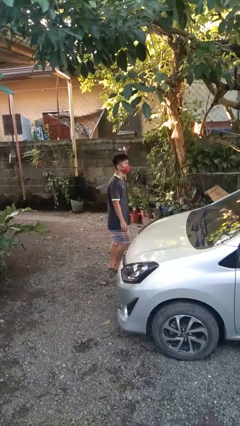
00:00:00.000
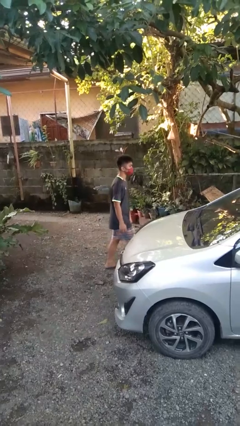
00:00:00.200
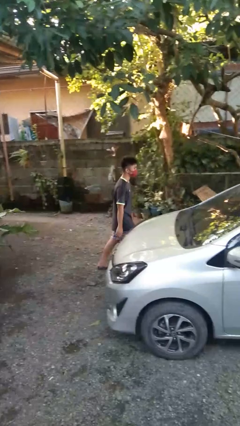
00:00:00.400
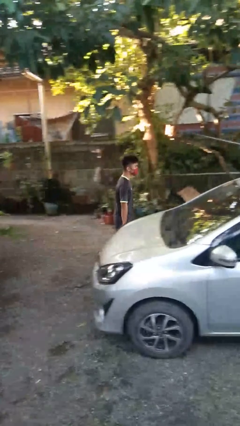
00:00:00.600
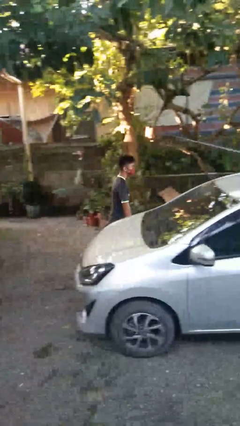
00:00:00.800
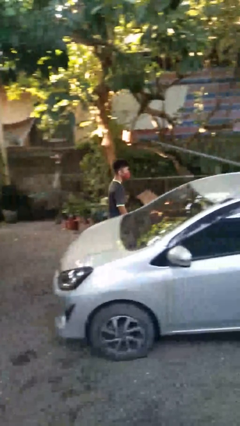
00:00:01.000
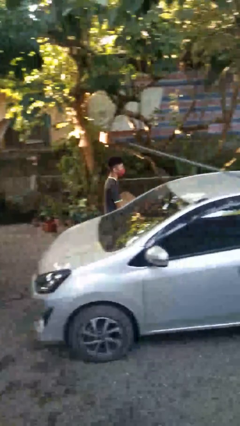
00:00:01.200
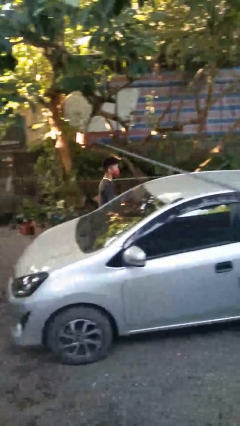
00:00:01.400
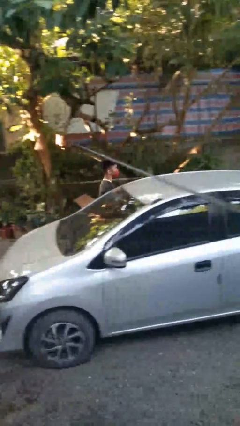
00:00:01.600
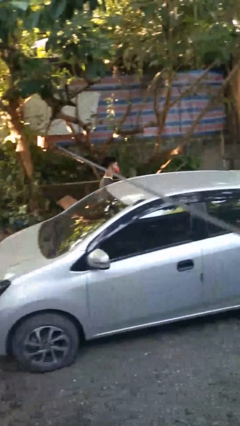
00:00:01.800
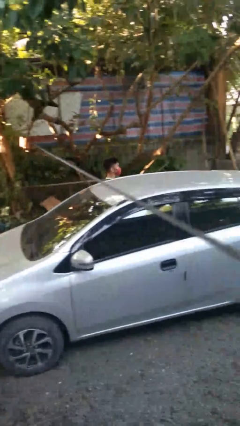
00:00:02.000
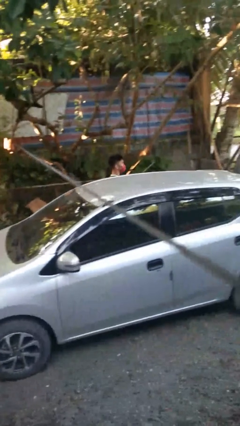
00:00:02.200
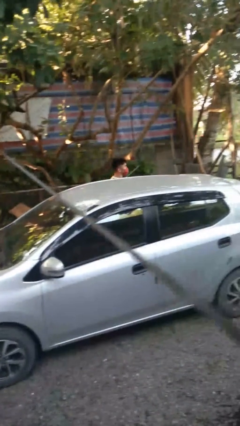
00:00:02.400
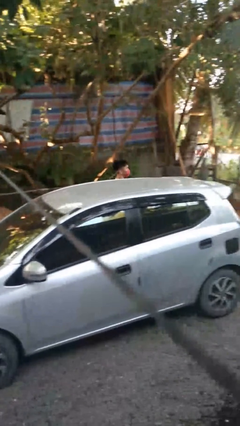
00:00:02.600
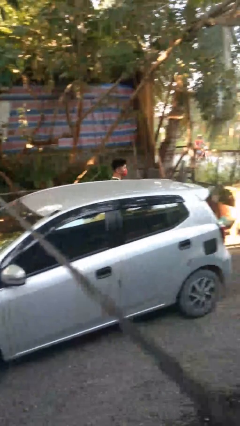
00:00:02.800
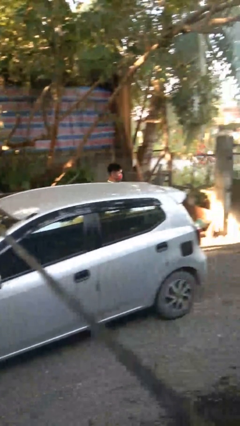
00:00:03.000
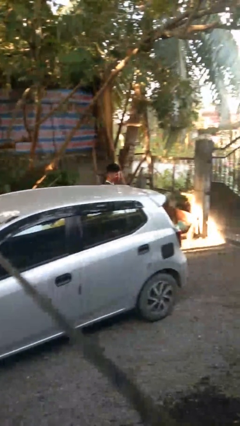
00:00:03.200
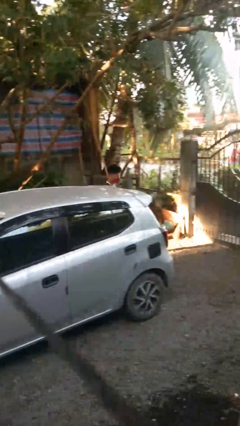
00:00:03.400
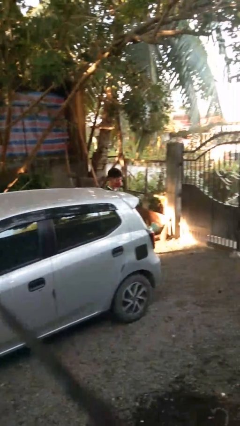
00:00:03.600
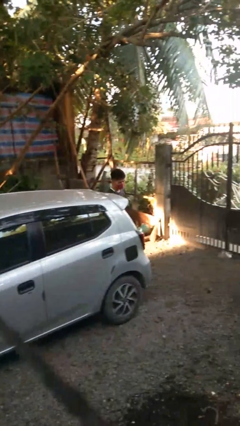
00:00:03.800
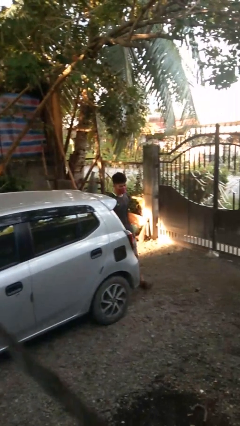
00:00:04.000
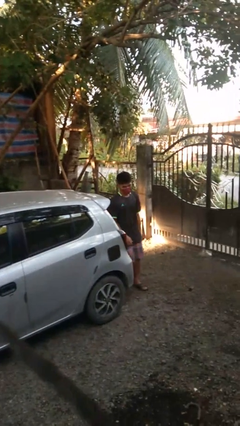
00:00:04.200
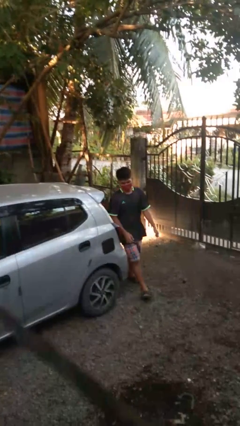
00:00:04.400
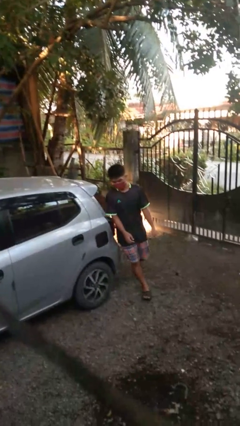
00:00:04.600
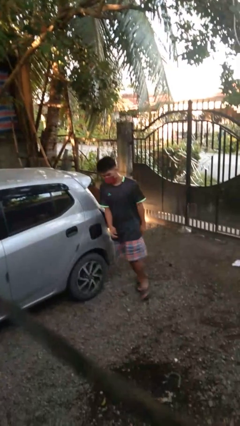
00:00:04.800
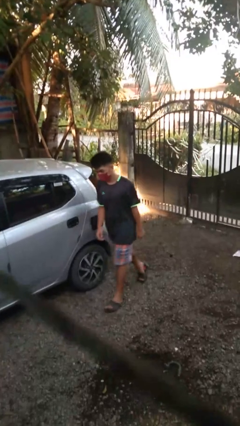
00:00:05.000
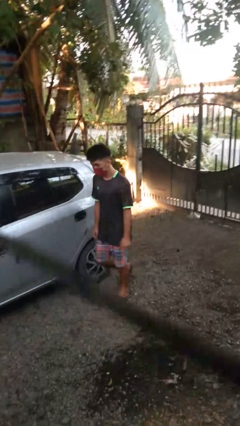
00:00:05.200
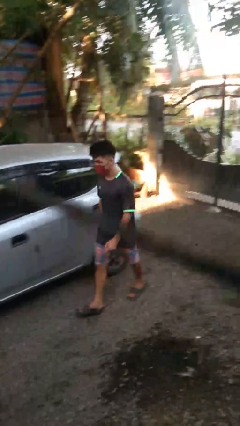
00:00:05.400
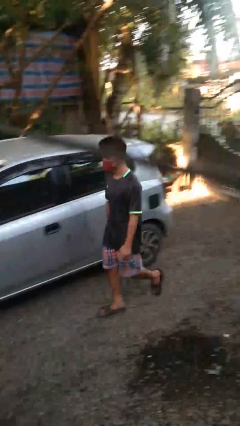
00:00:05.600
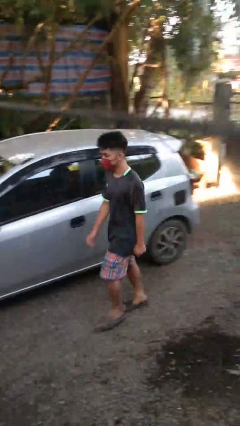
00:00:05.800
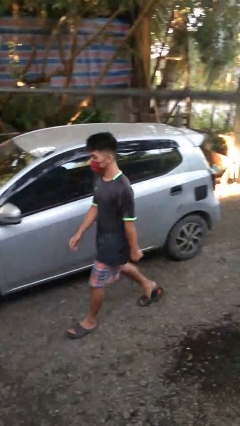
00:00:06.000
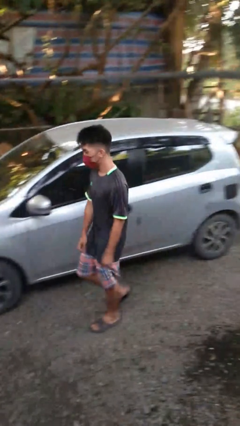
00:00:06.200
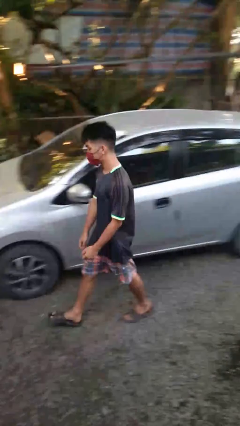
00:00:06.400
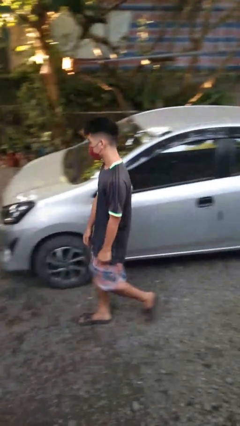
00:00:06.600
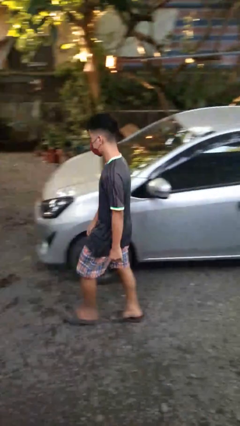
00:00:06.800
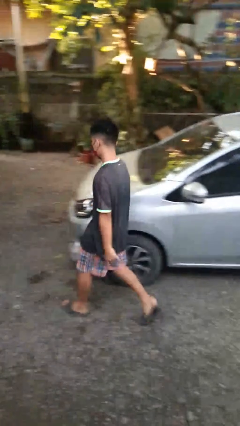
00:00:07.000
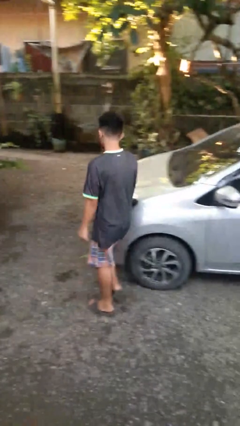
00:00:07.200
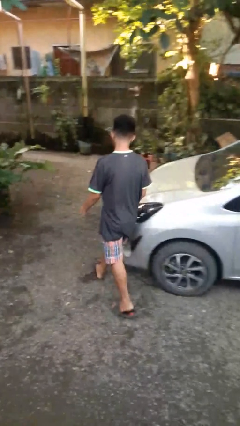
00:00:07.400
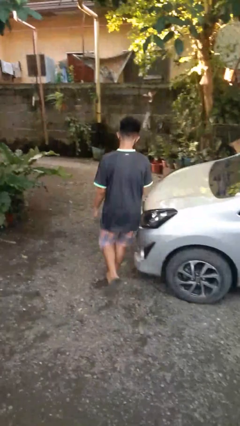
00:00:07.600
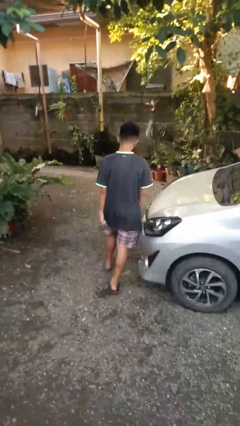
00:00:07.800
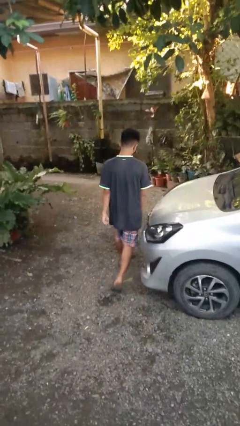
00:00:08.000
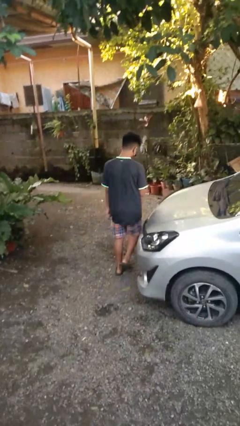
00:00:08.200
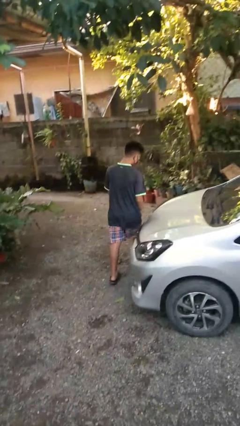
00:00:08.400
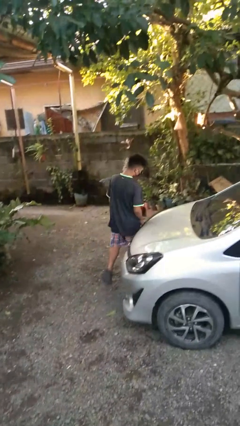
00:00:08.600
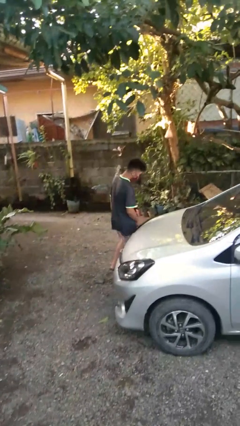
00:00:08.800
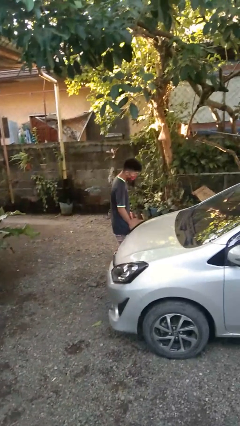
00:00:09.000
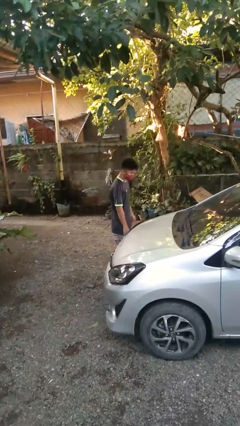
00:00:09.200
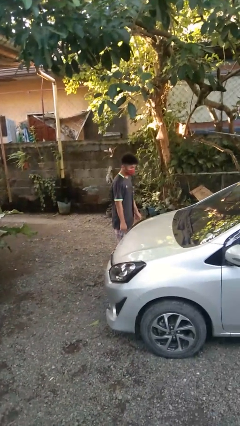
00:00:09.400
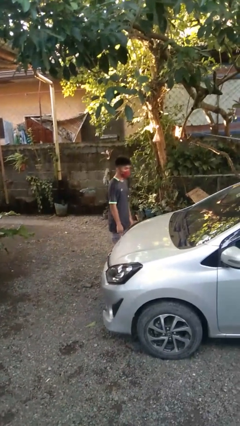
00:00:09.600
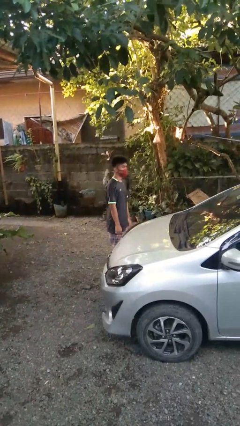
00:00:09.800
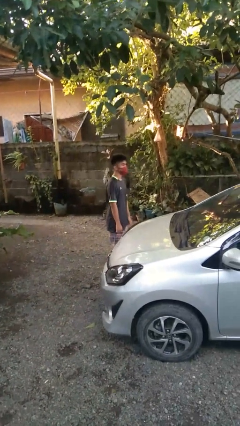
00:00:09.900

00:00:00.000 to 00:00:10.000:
person walks around car

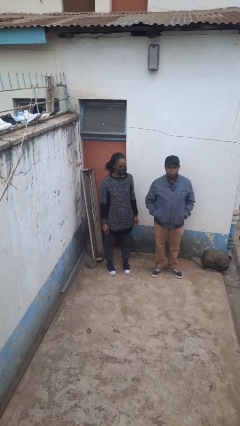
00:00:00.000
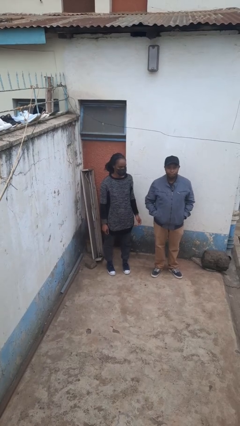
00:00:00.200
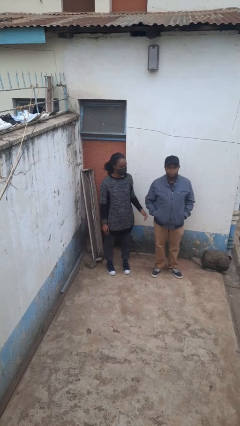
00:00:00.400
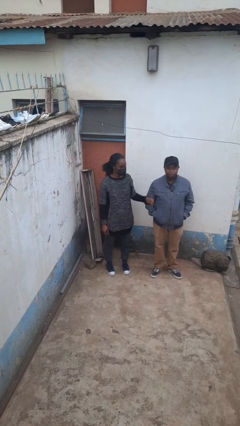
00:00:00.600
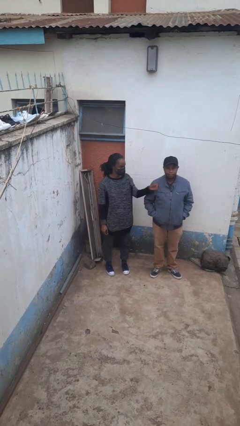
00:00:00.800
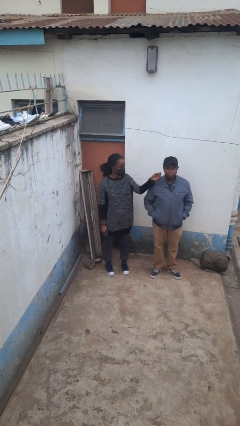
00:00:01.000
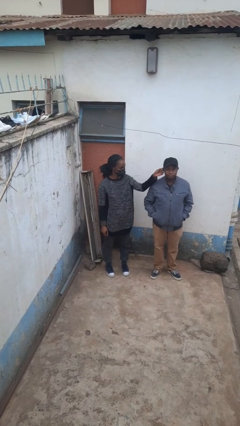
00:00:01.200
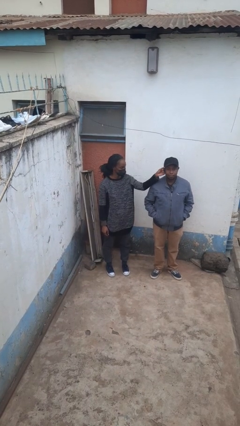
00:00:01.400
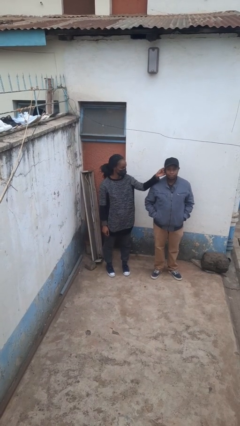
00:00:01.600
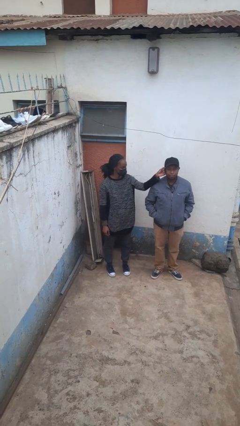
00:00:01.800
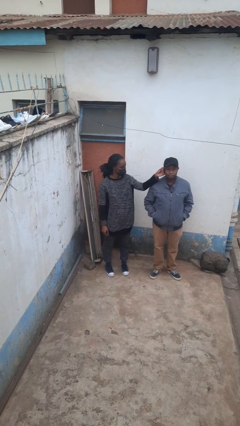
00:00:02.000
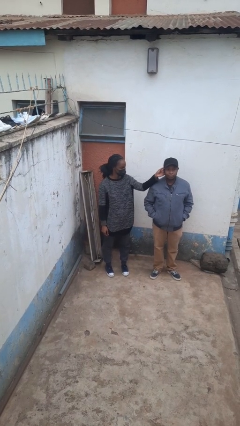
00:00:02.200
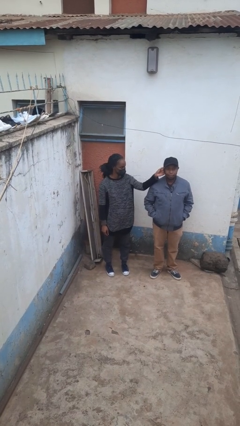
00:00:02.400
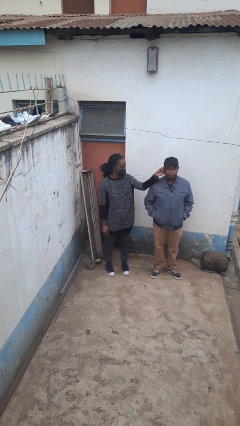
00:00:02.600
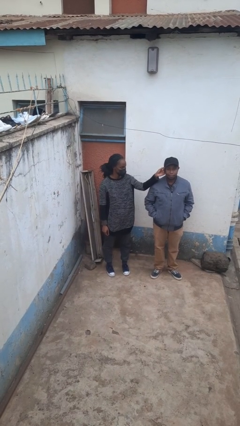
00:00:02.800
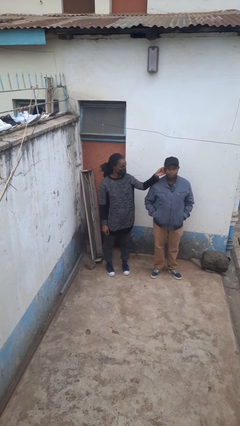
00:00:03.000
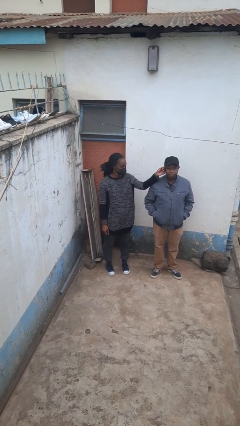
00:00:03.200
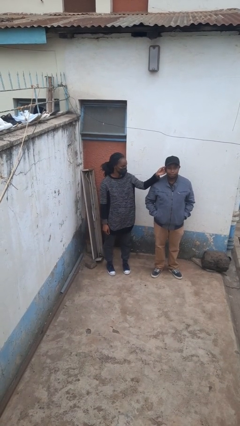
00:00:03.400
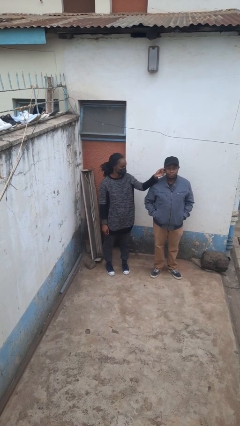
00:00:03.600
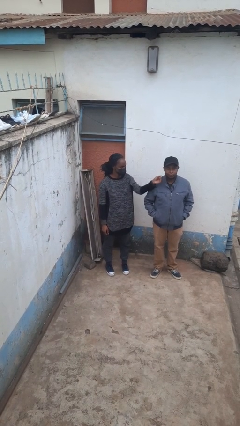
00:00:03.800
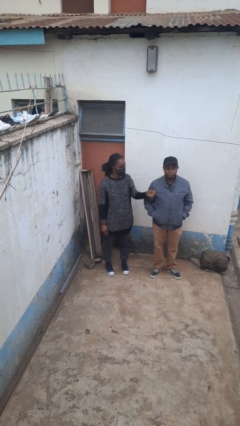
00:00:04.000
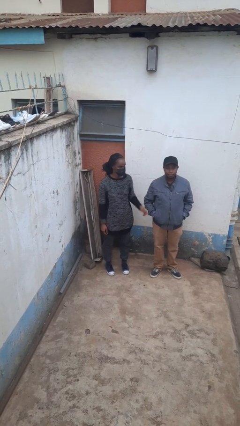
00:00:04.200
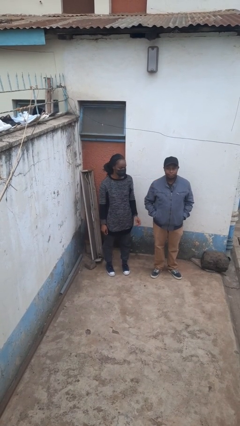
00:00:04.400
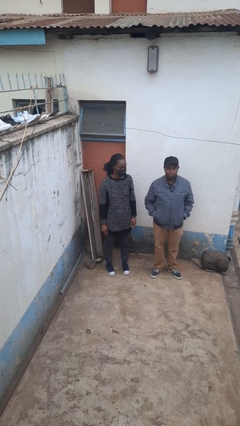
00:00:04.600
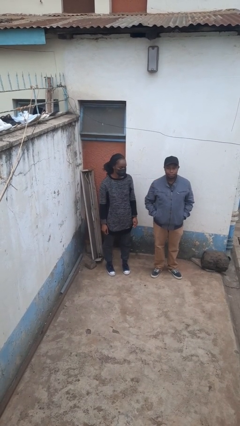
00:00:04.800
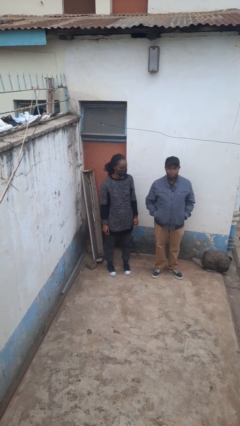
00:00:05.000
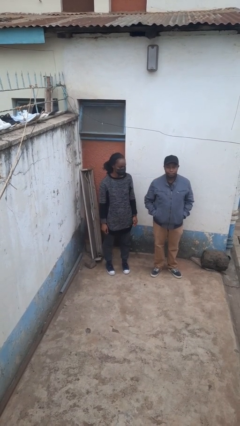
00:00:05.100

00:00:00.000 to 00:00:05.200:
person touches face of person

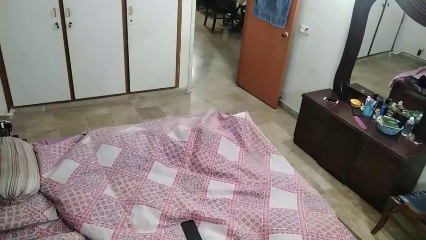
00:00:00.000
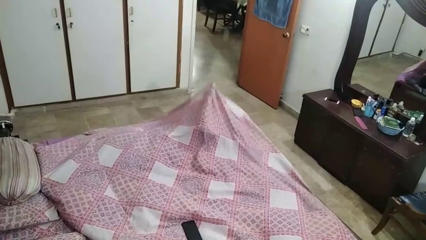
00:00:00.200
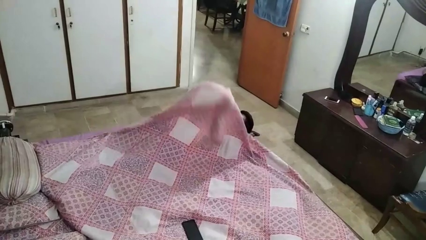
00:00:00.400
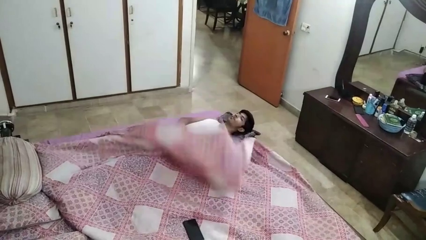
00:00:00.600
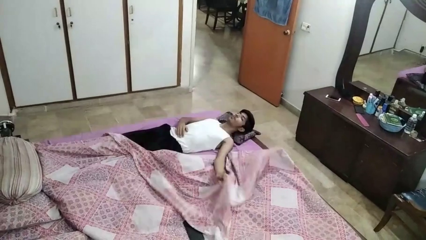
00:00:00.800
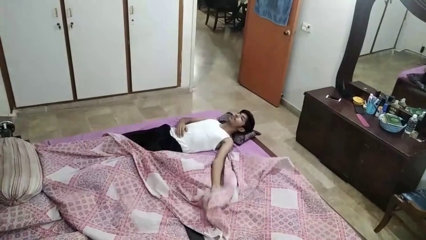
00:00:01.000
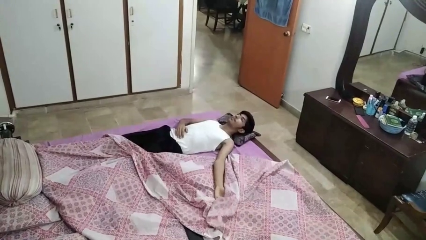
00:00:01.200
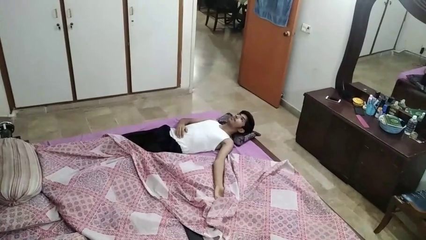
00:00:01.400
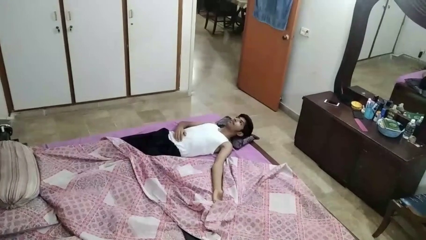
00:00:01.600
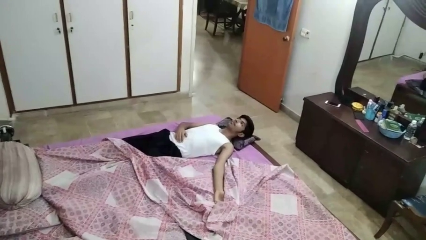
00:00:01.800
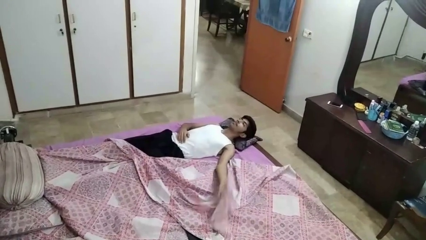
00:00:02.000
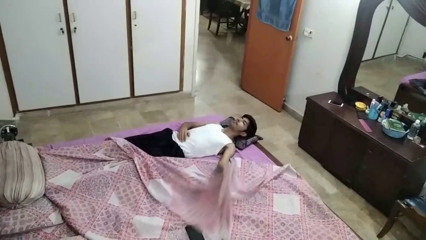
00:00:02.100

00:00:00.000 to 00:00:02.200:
person uncovers with bedsheets

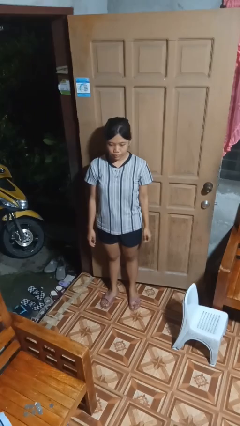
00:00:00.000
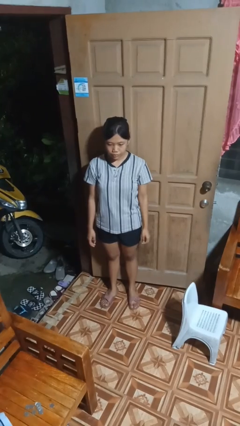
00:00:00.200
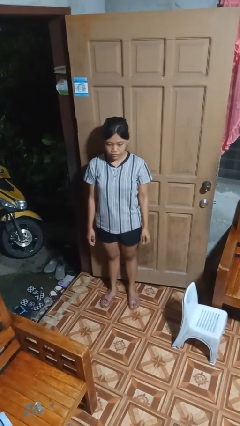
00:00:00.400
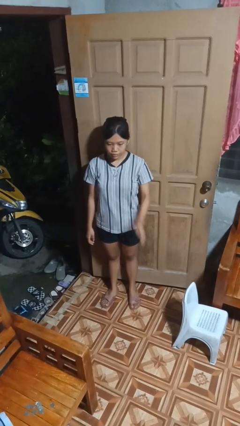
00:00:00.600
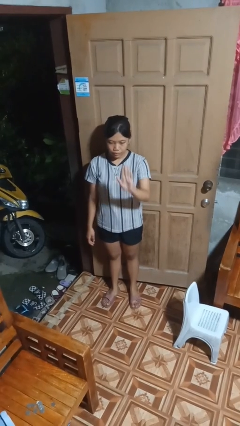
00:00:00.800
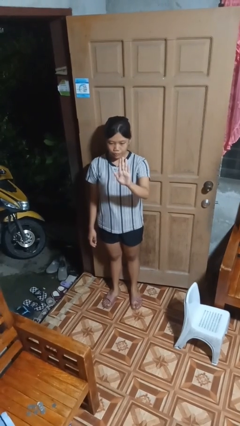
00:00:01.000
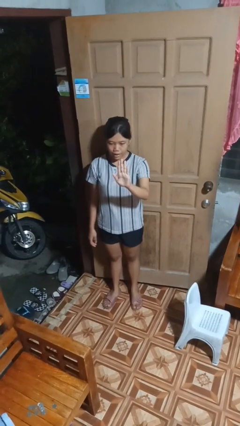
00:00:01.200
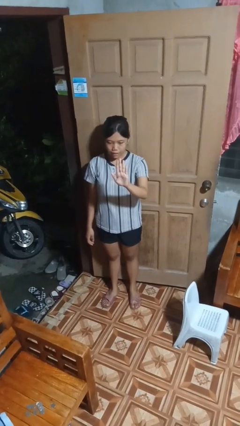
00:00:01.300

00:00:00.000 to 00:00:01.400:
person gestures number five
